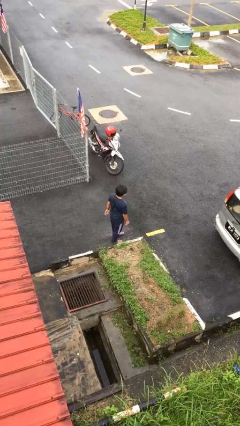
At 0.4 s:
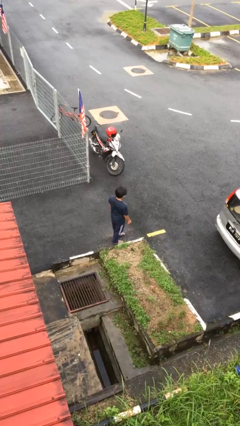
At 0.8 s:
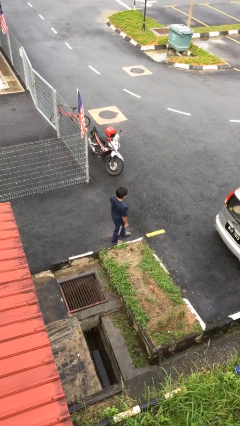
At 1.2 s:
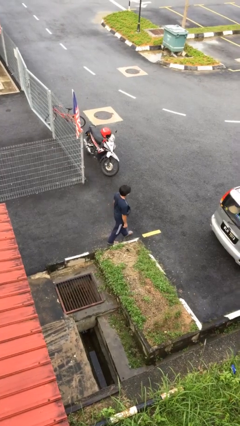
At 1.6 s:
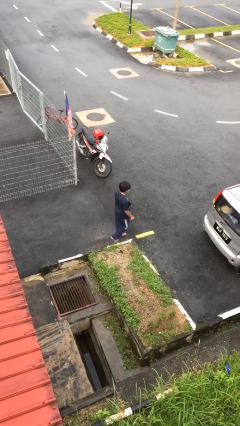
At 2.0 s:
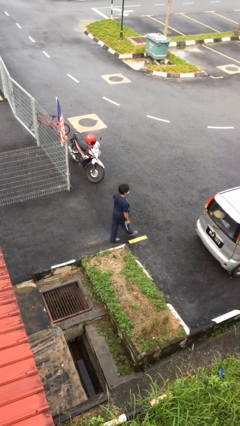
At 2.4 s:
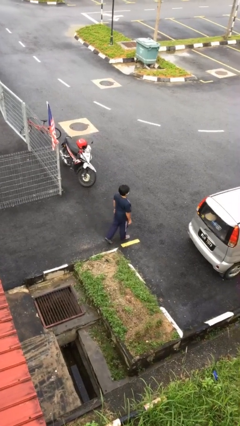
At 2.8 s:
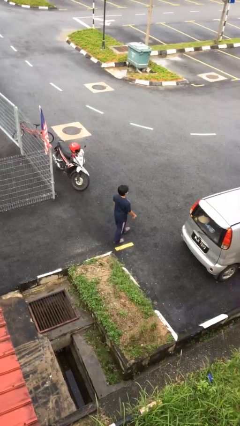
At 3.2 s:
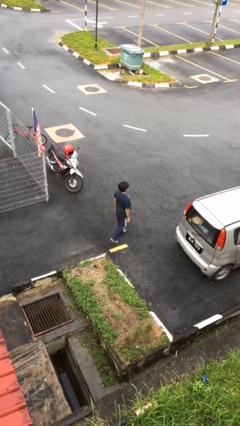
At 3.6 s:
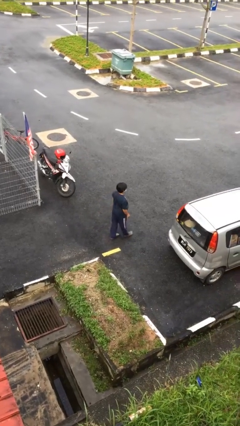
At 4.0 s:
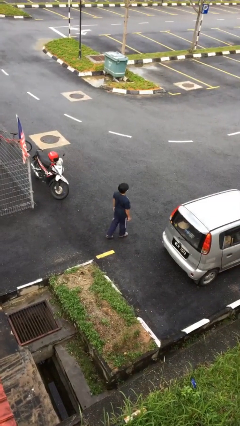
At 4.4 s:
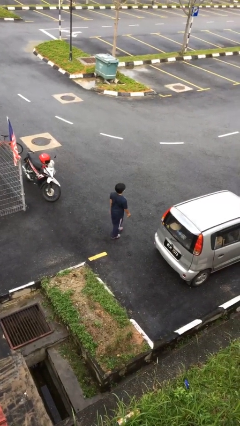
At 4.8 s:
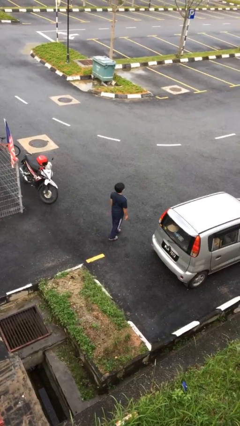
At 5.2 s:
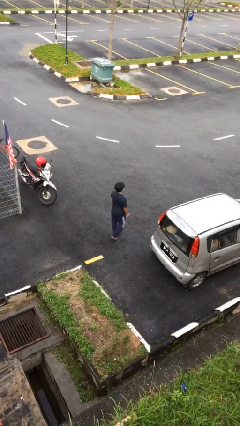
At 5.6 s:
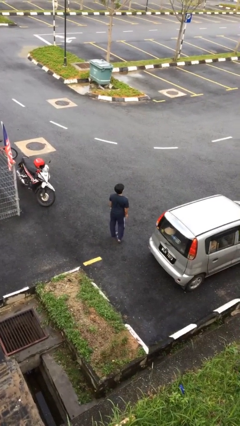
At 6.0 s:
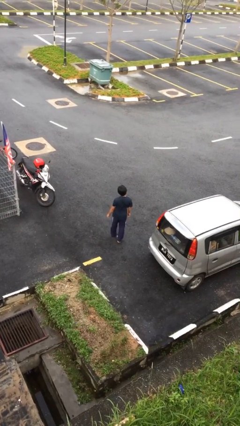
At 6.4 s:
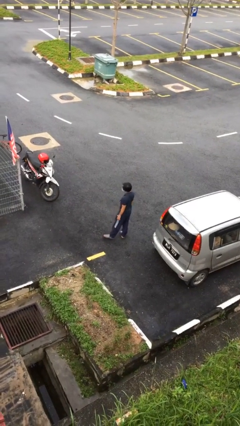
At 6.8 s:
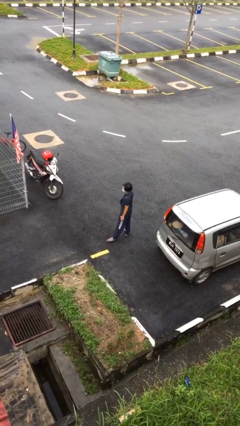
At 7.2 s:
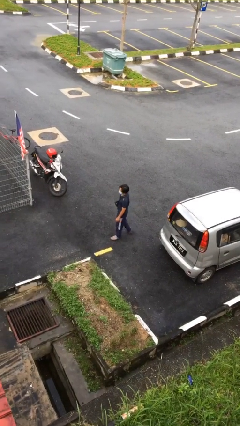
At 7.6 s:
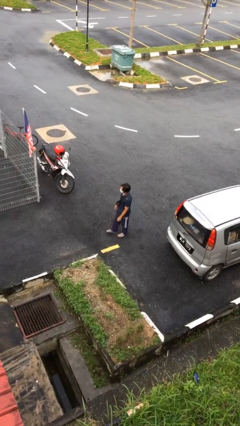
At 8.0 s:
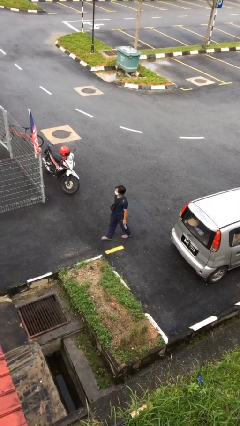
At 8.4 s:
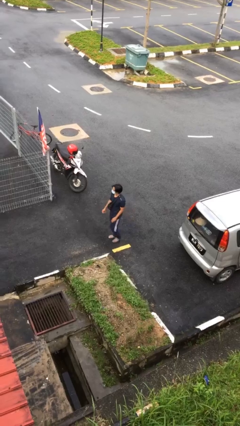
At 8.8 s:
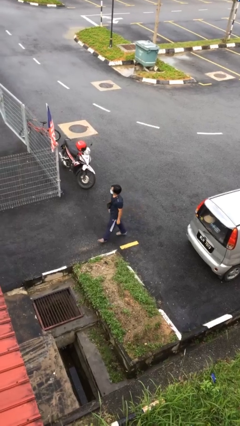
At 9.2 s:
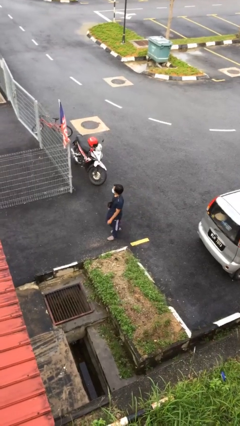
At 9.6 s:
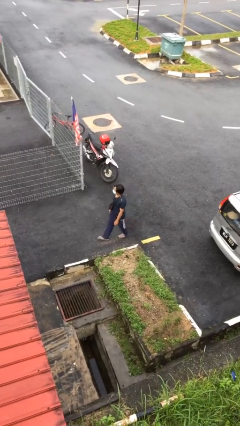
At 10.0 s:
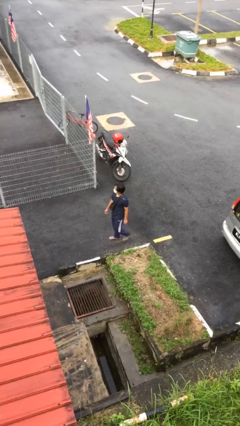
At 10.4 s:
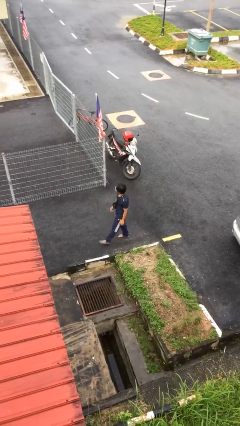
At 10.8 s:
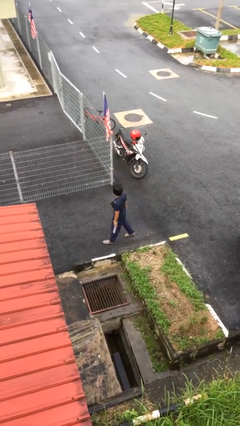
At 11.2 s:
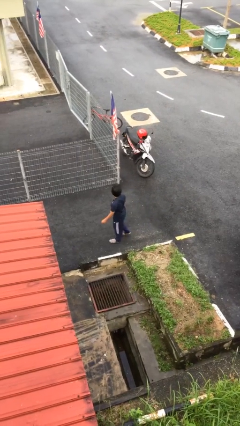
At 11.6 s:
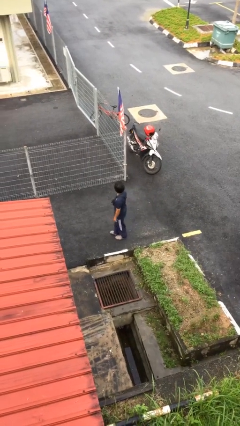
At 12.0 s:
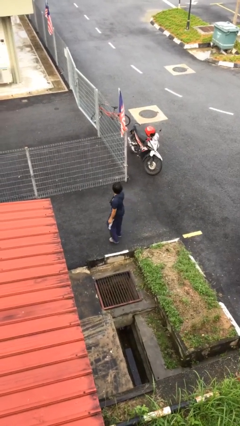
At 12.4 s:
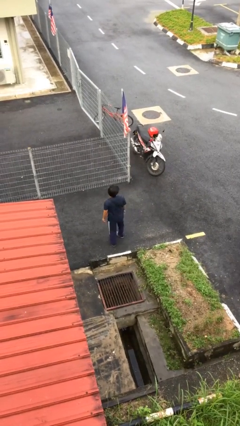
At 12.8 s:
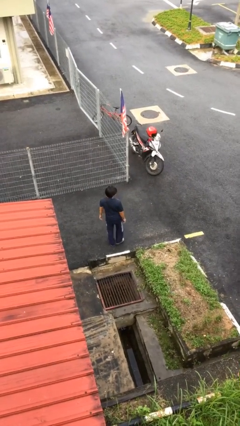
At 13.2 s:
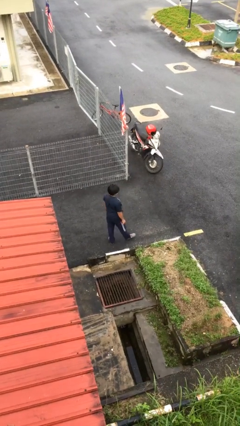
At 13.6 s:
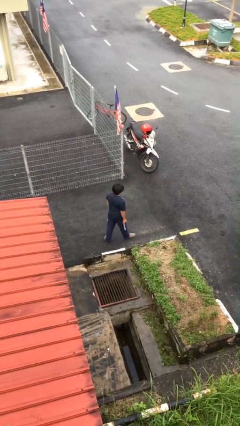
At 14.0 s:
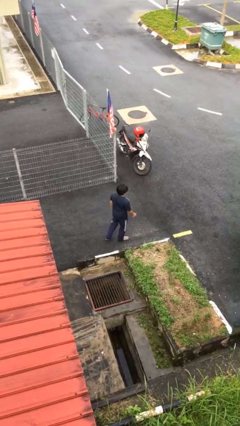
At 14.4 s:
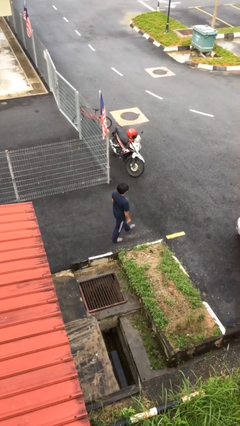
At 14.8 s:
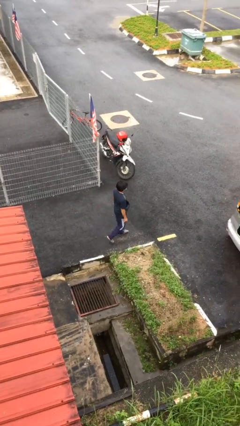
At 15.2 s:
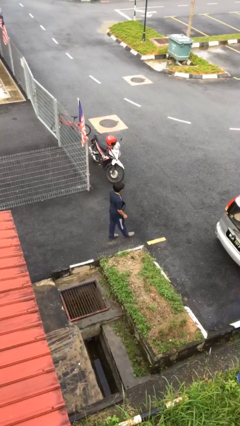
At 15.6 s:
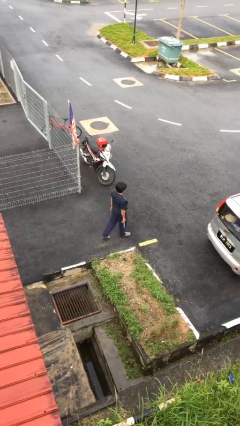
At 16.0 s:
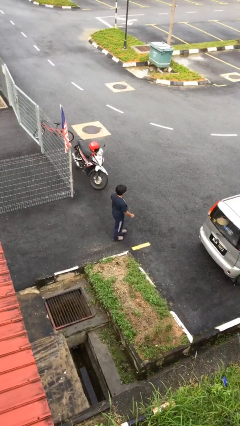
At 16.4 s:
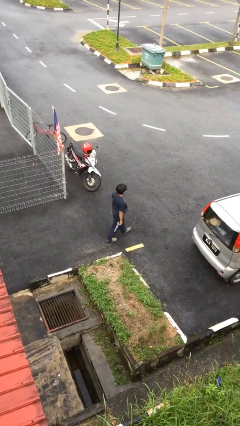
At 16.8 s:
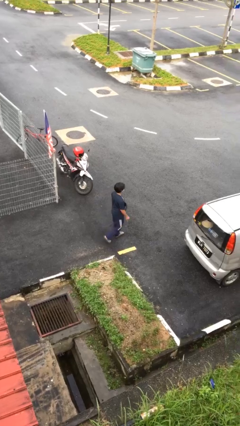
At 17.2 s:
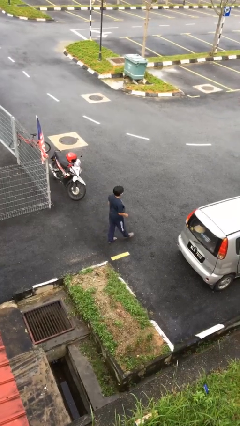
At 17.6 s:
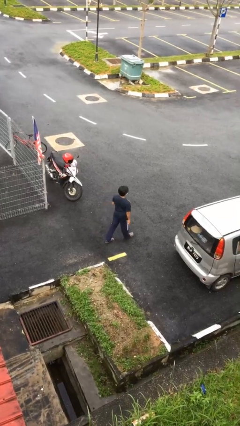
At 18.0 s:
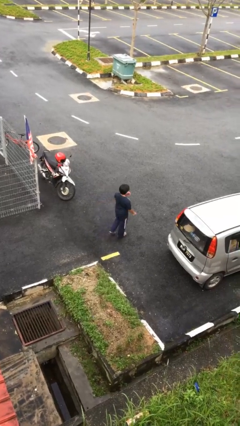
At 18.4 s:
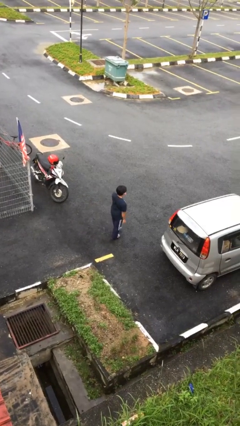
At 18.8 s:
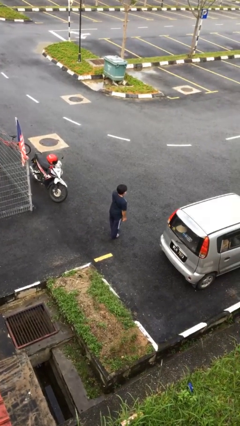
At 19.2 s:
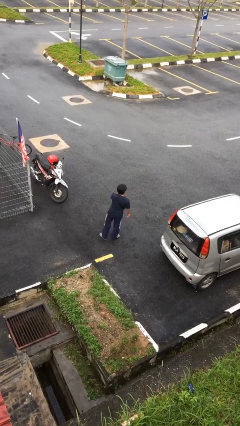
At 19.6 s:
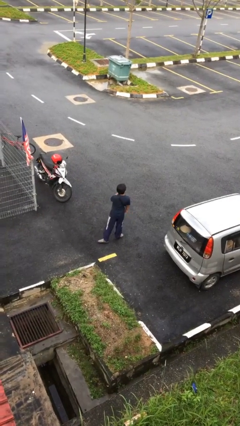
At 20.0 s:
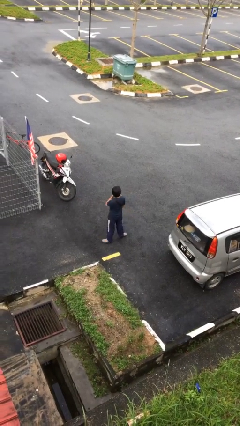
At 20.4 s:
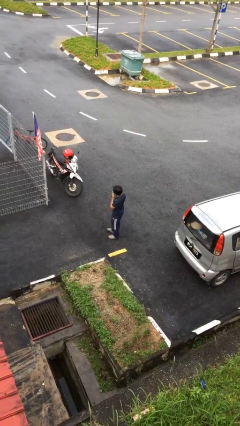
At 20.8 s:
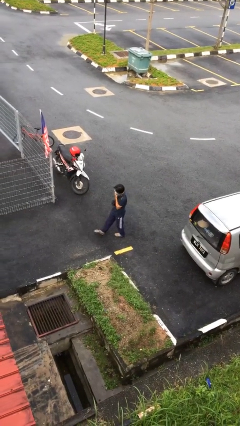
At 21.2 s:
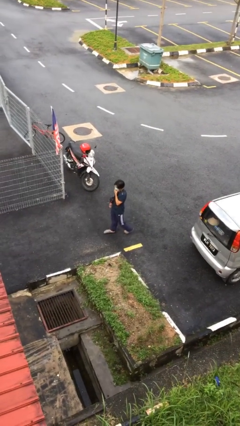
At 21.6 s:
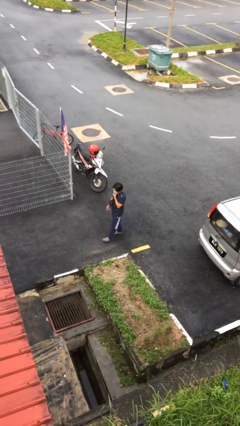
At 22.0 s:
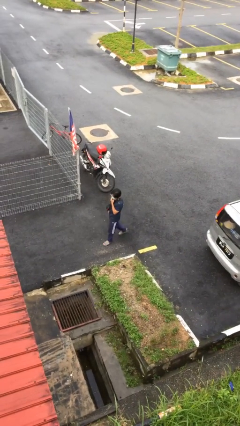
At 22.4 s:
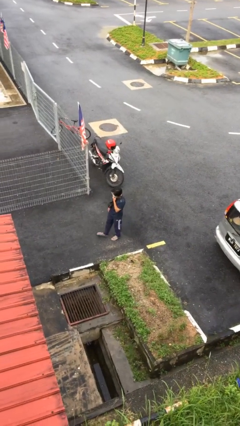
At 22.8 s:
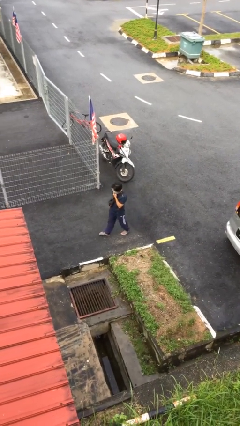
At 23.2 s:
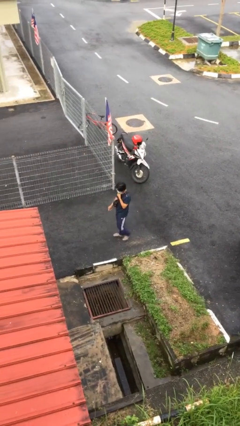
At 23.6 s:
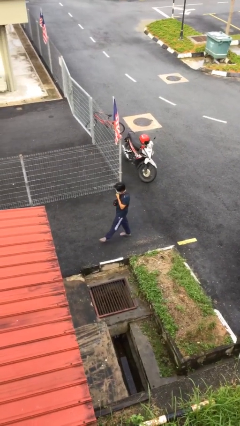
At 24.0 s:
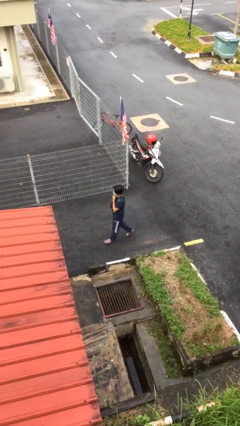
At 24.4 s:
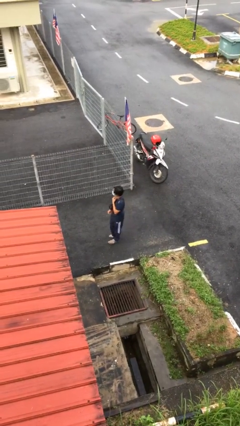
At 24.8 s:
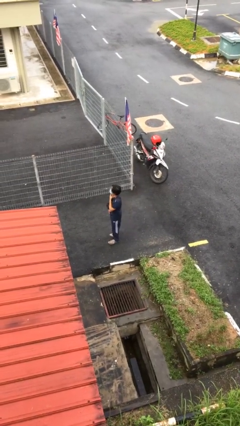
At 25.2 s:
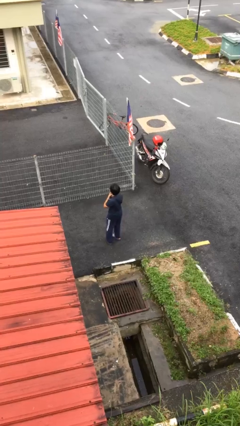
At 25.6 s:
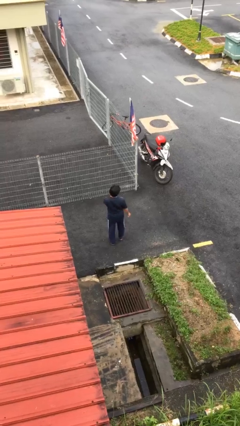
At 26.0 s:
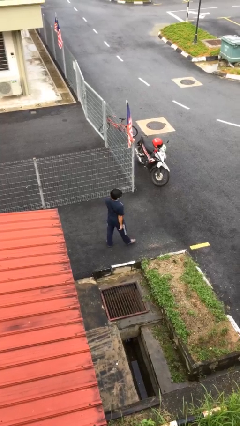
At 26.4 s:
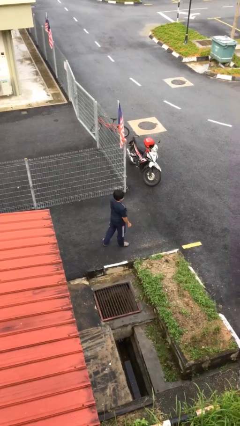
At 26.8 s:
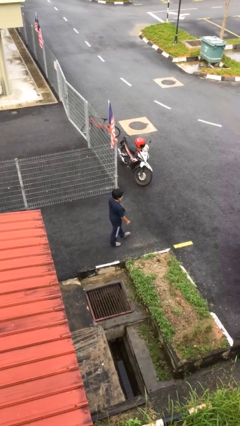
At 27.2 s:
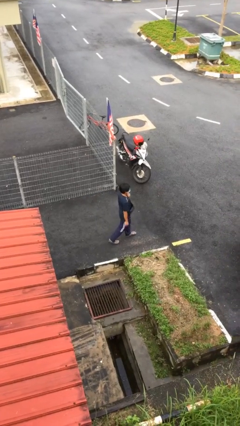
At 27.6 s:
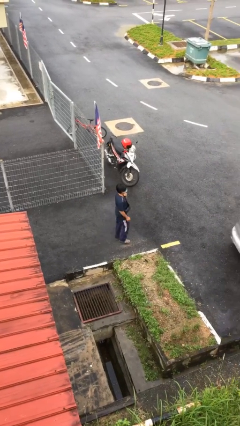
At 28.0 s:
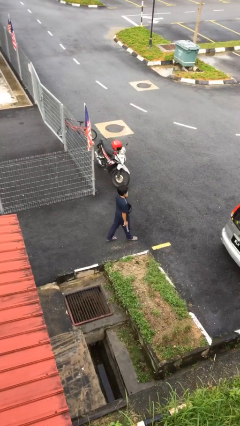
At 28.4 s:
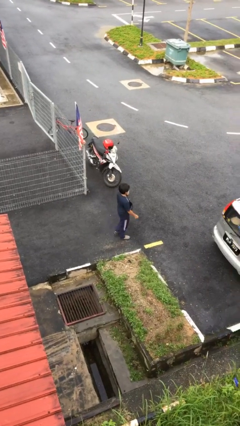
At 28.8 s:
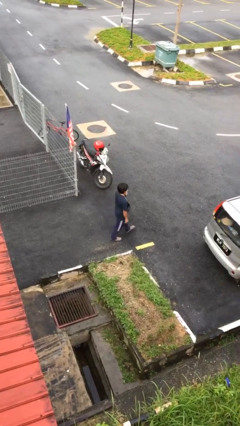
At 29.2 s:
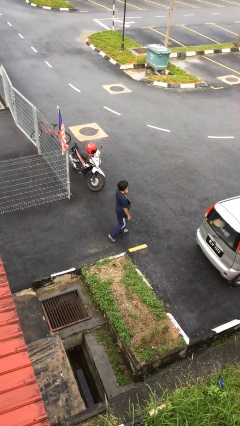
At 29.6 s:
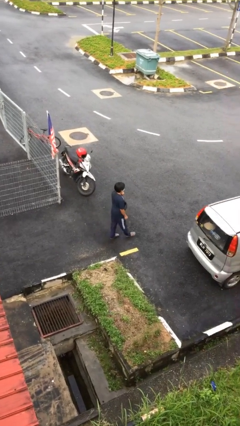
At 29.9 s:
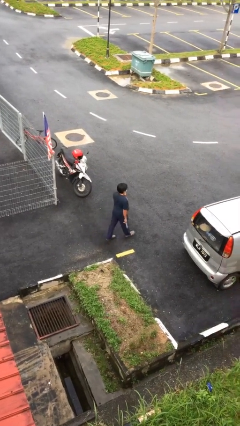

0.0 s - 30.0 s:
person walks

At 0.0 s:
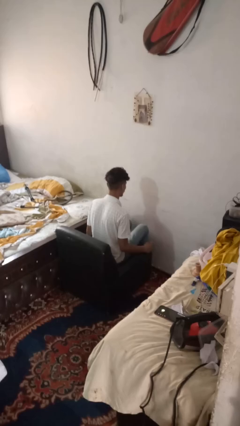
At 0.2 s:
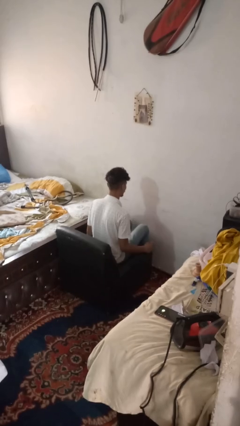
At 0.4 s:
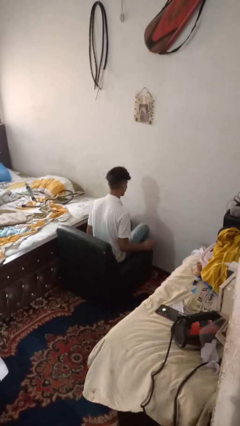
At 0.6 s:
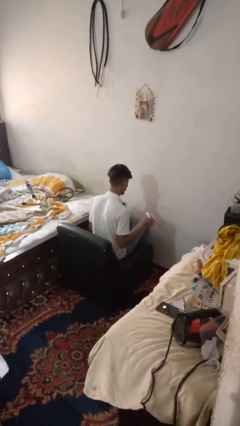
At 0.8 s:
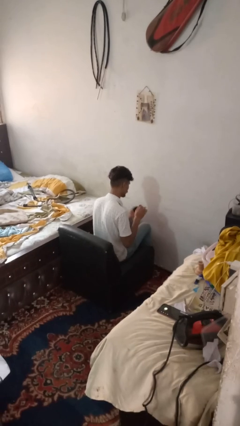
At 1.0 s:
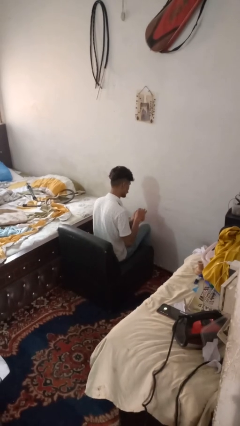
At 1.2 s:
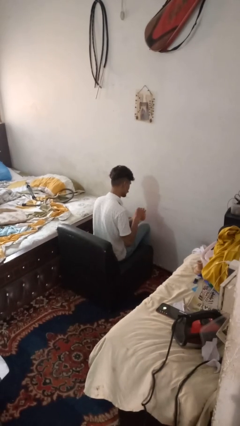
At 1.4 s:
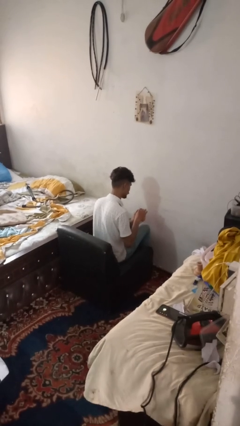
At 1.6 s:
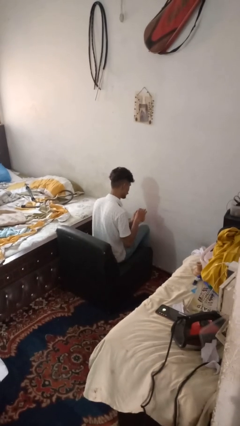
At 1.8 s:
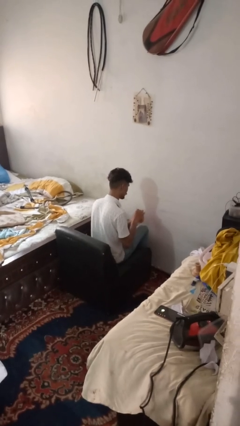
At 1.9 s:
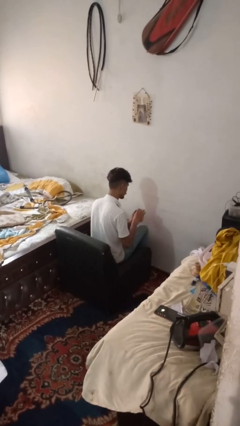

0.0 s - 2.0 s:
person stirs mug

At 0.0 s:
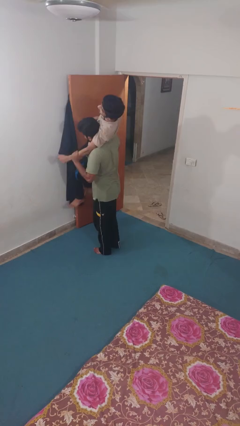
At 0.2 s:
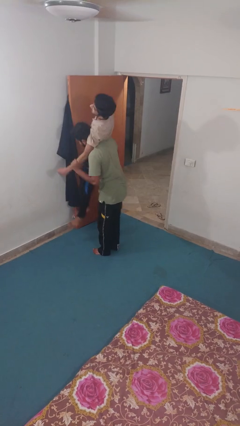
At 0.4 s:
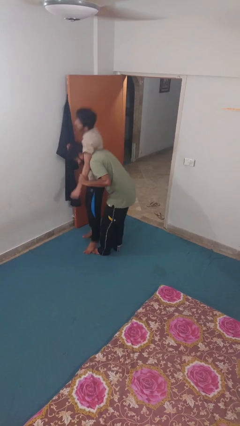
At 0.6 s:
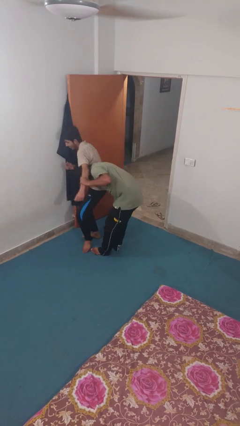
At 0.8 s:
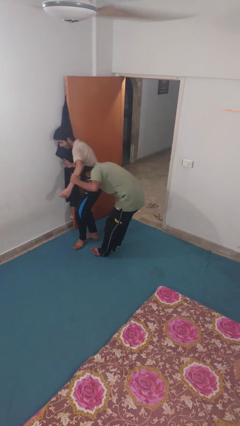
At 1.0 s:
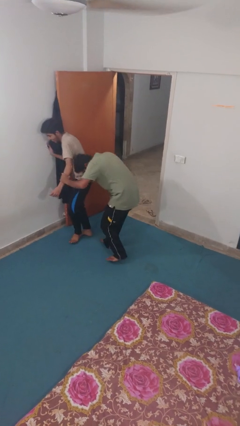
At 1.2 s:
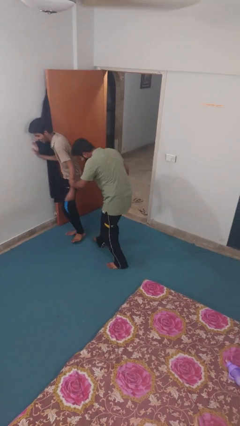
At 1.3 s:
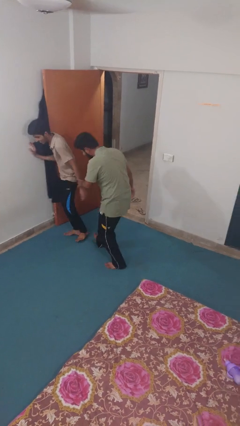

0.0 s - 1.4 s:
person puts down person
